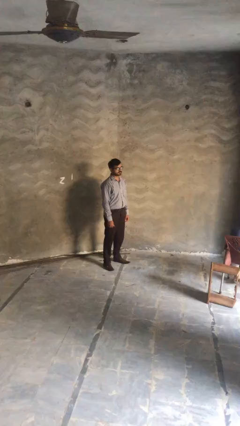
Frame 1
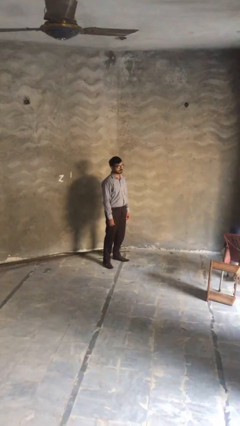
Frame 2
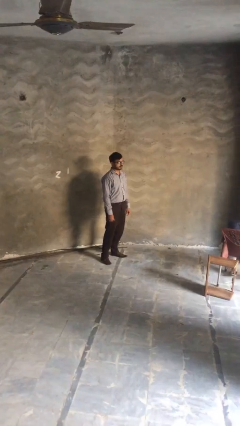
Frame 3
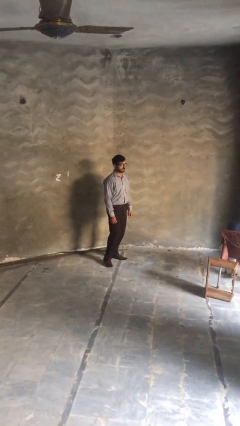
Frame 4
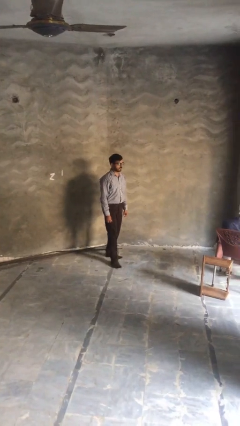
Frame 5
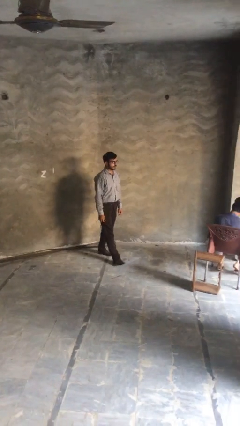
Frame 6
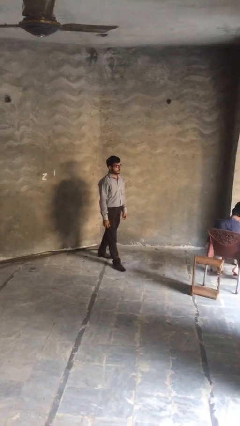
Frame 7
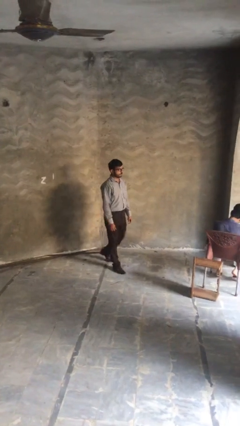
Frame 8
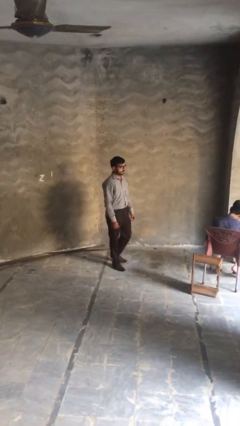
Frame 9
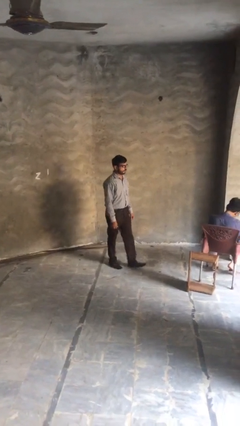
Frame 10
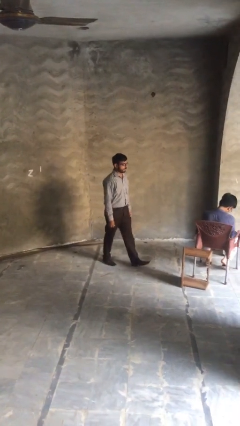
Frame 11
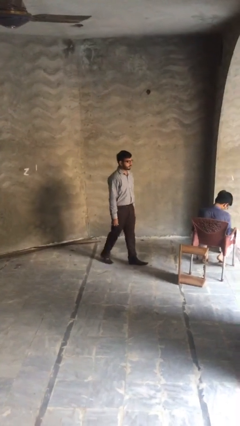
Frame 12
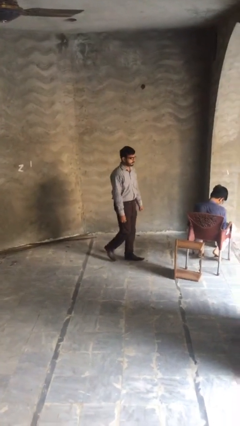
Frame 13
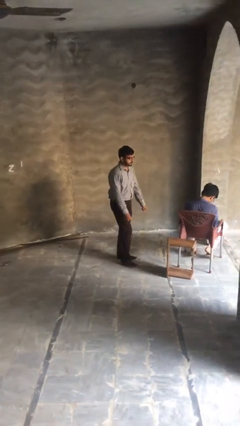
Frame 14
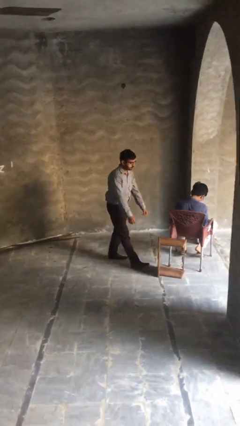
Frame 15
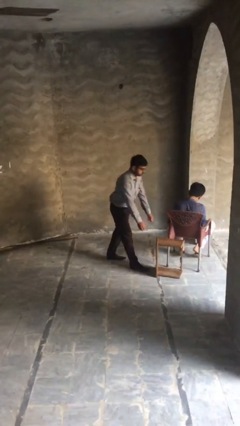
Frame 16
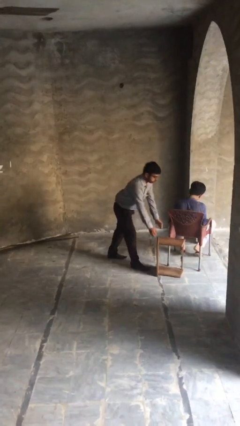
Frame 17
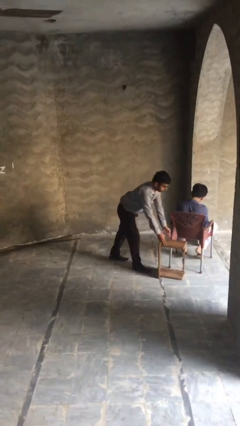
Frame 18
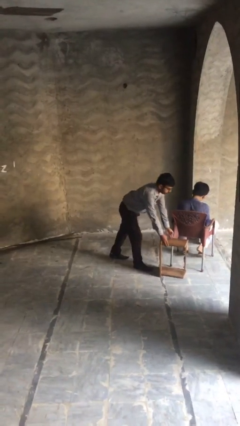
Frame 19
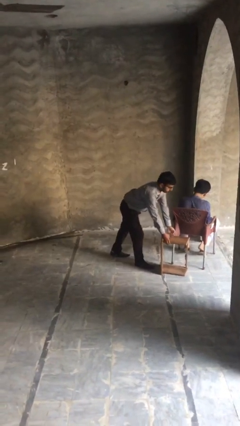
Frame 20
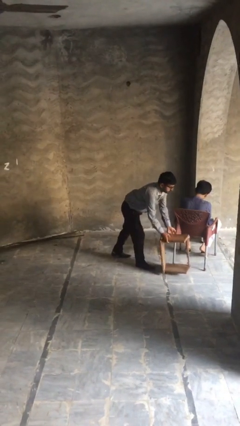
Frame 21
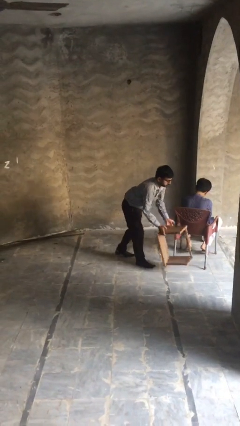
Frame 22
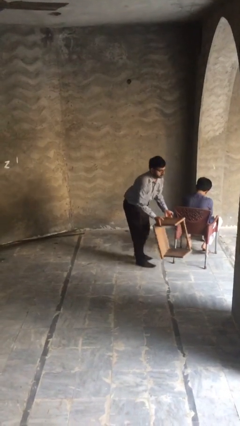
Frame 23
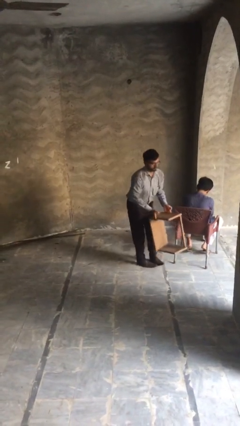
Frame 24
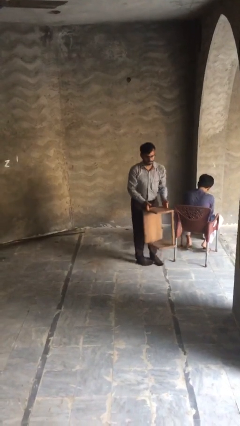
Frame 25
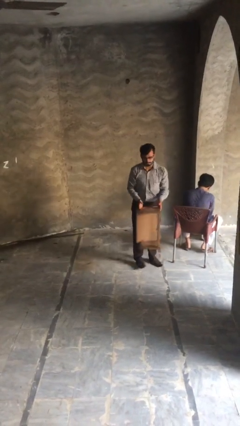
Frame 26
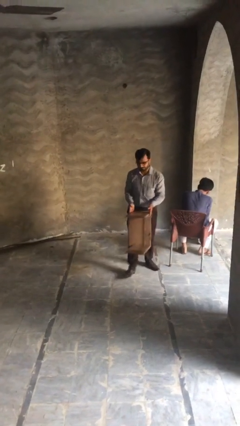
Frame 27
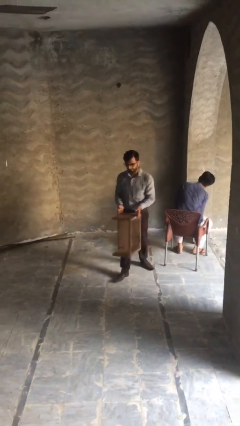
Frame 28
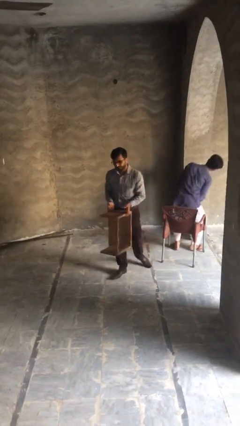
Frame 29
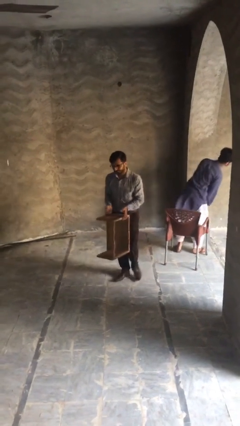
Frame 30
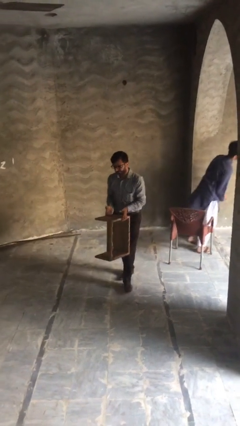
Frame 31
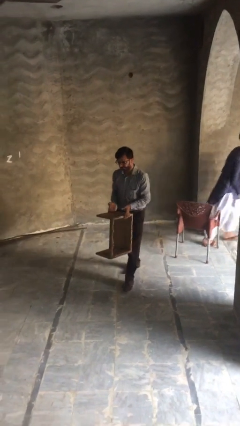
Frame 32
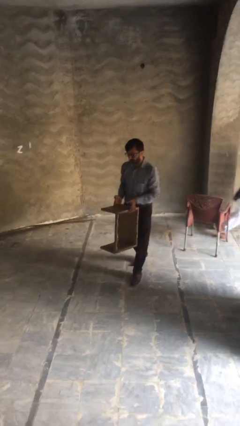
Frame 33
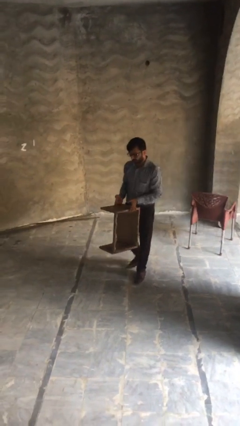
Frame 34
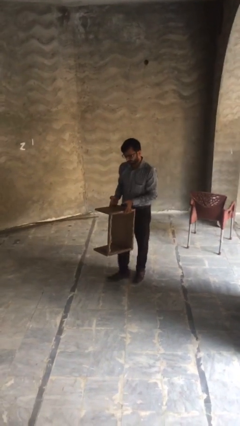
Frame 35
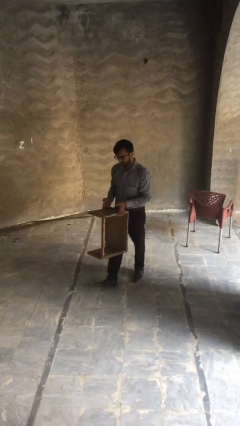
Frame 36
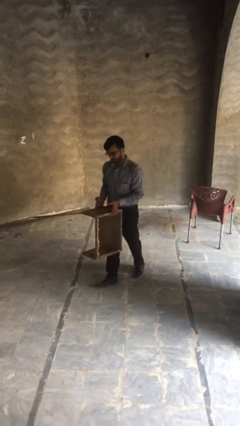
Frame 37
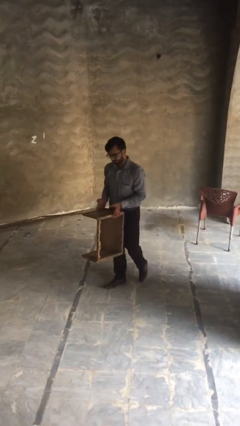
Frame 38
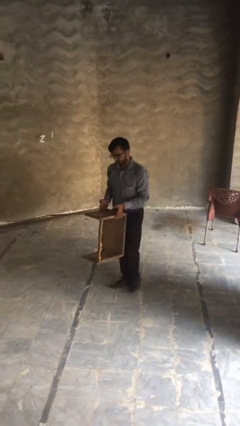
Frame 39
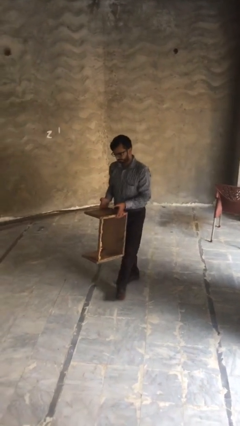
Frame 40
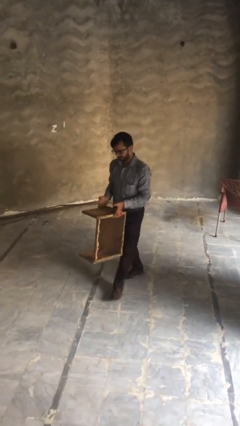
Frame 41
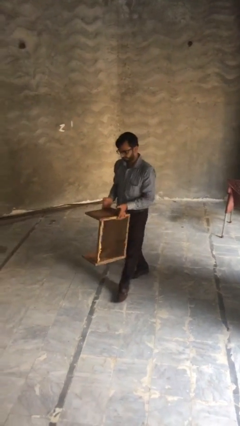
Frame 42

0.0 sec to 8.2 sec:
person steals object from person

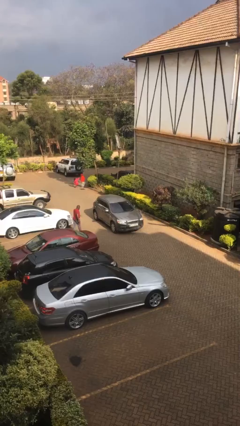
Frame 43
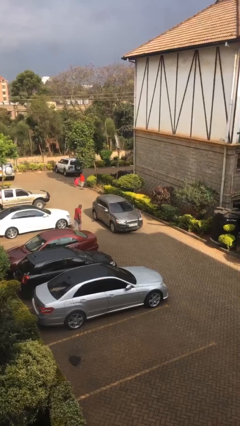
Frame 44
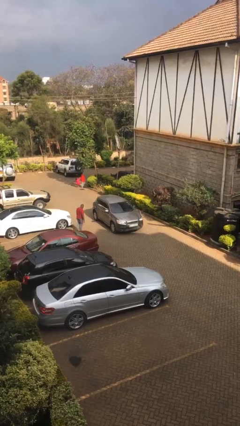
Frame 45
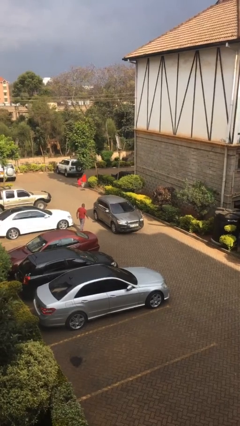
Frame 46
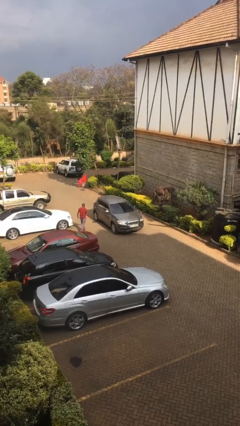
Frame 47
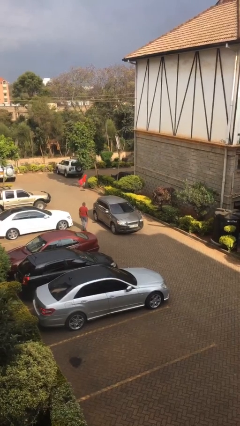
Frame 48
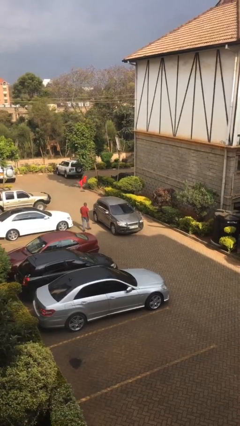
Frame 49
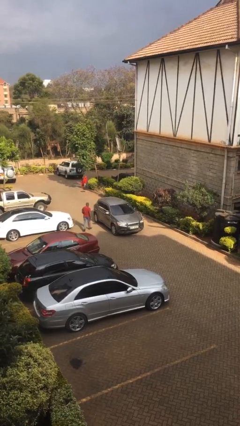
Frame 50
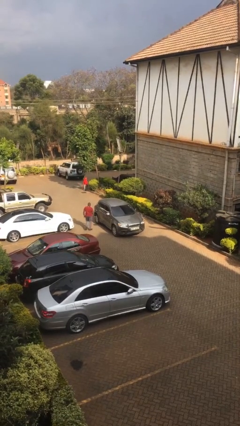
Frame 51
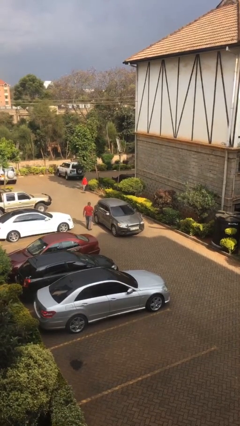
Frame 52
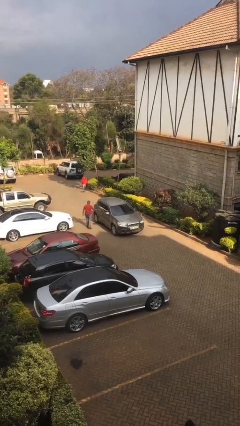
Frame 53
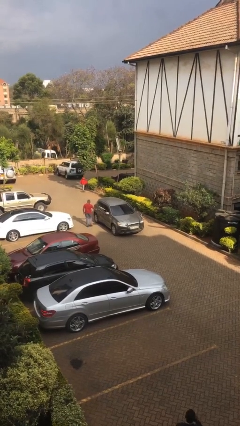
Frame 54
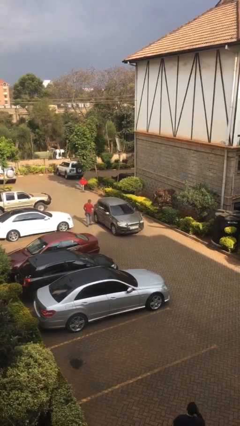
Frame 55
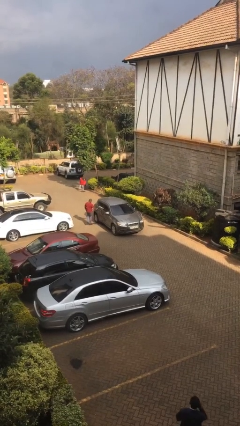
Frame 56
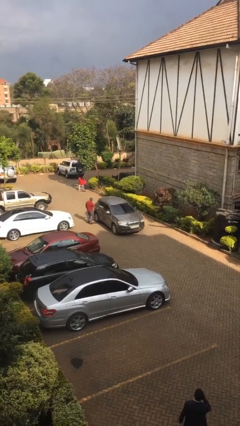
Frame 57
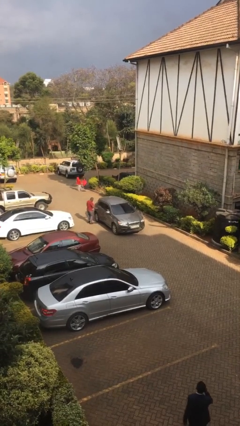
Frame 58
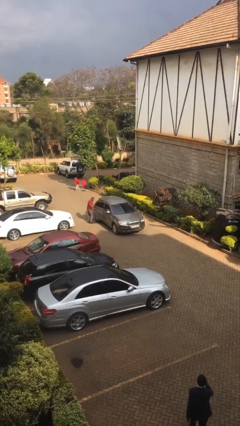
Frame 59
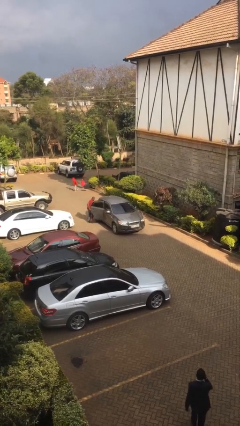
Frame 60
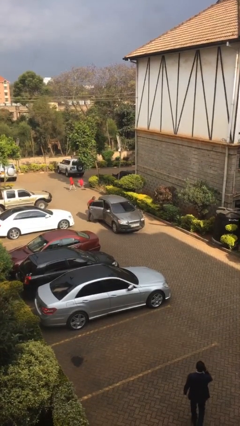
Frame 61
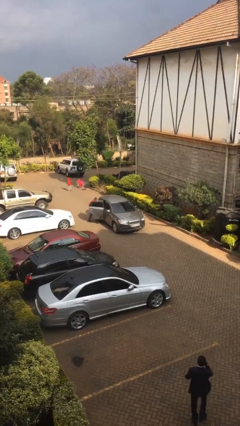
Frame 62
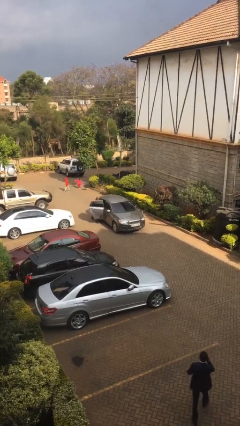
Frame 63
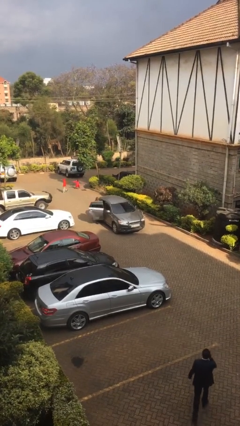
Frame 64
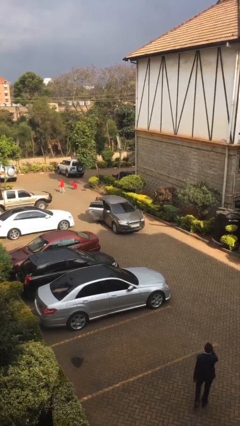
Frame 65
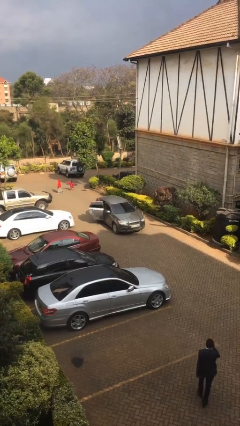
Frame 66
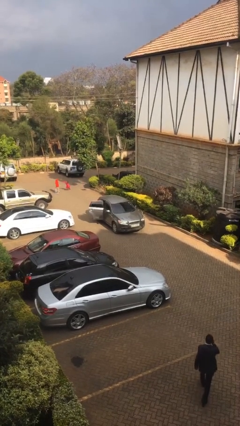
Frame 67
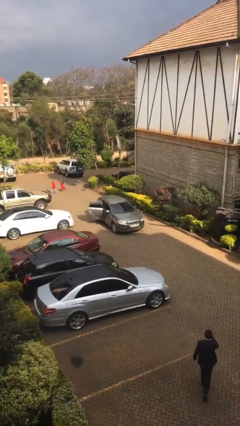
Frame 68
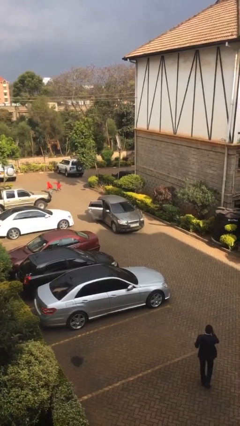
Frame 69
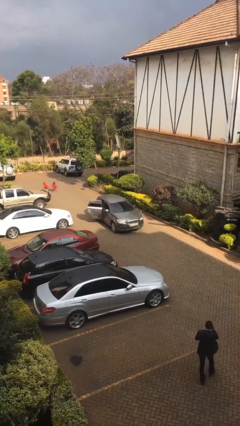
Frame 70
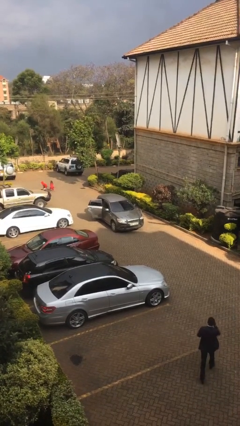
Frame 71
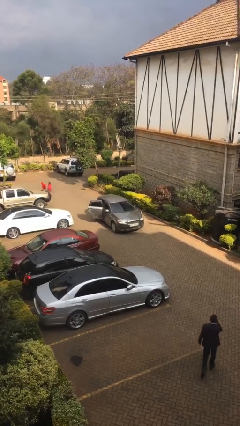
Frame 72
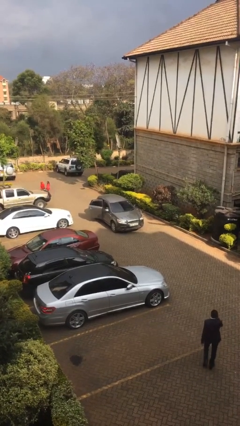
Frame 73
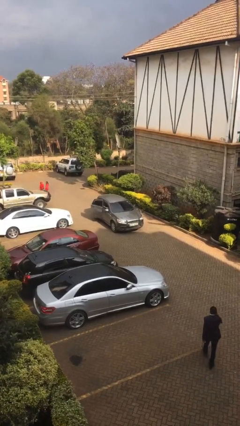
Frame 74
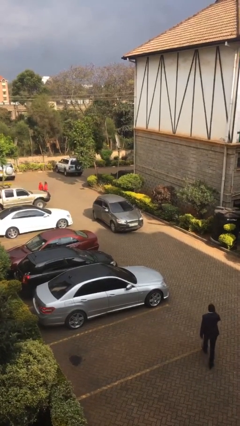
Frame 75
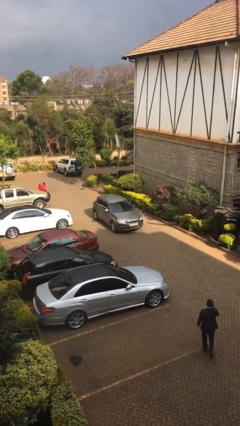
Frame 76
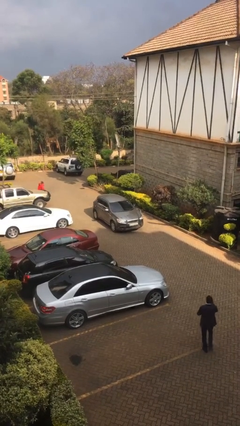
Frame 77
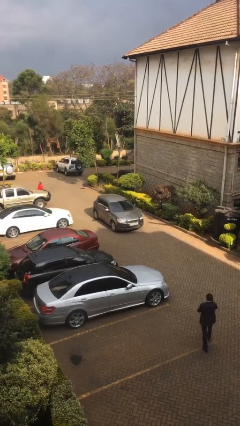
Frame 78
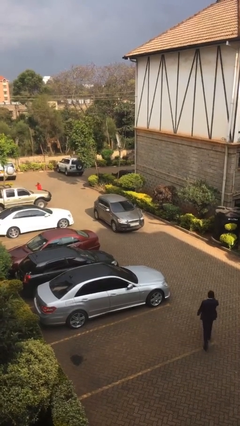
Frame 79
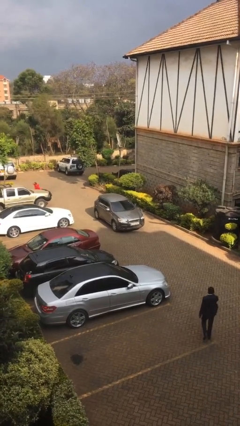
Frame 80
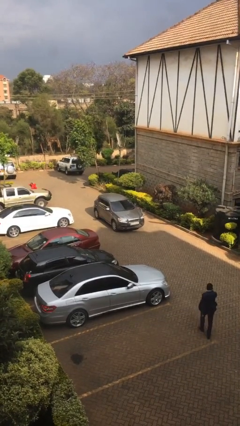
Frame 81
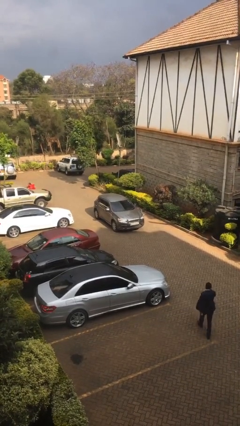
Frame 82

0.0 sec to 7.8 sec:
car picks up person

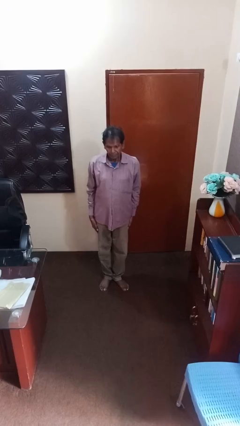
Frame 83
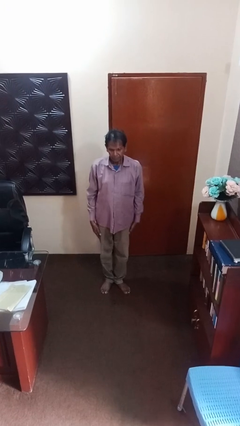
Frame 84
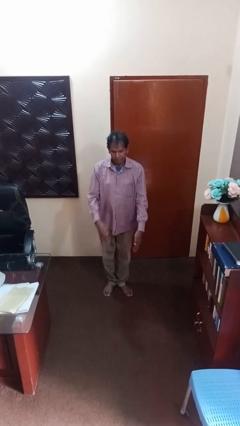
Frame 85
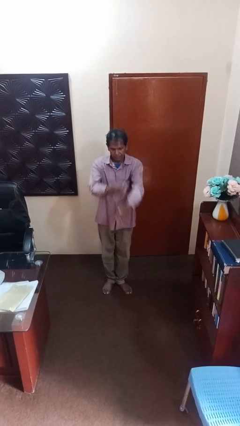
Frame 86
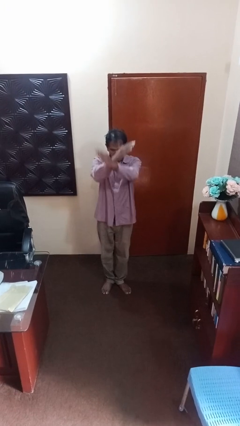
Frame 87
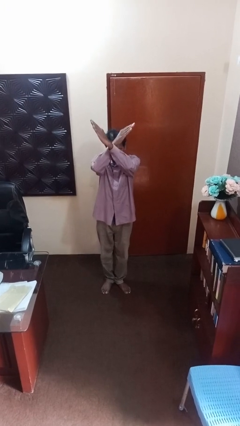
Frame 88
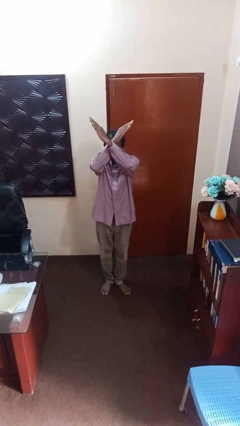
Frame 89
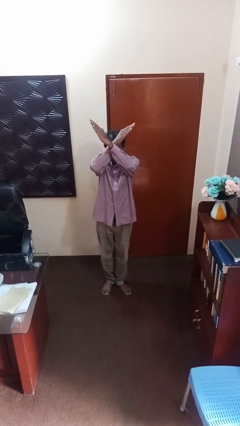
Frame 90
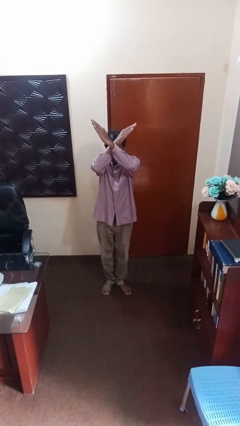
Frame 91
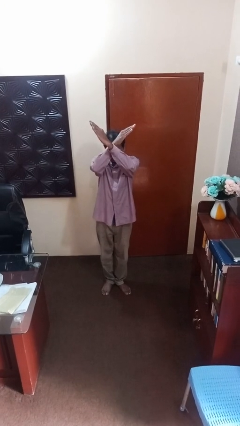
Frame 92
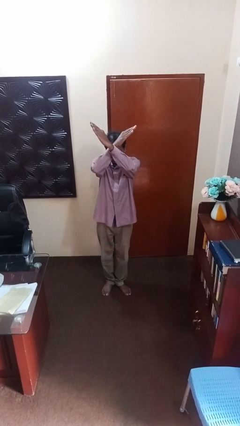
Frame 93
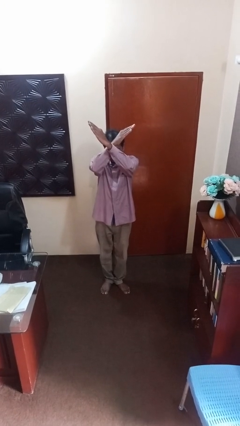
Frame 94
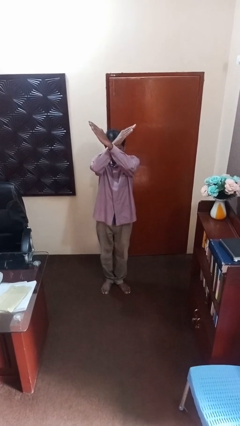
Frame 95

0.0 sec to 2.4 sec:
person gestures arms x
